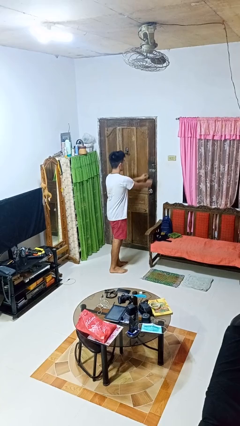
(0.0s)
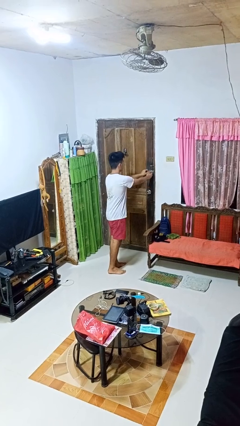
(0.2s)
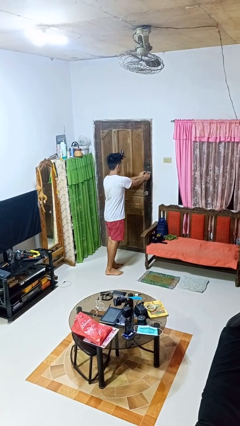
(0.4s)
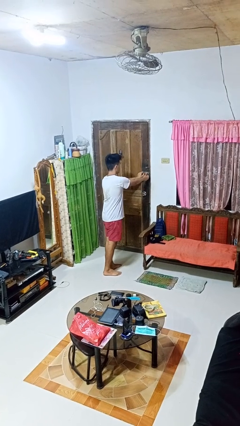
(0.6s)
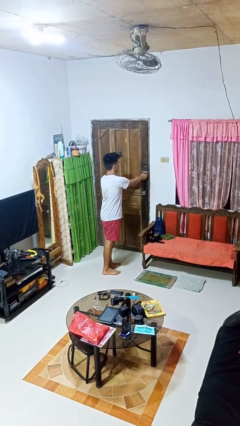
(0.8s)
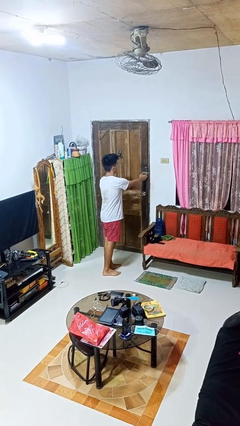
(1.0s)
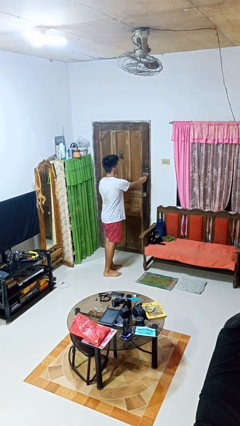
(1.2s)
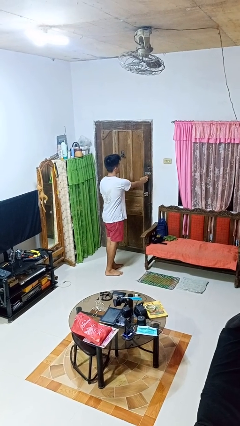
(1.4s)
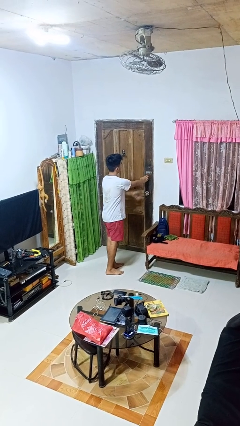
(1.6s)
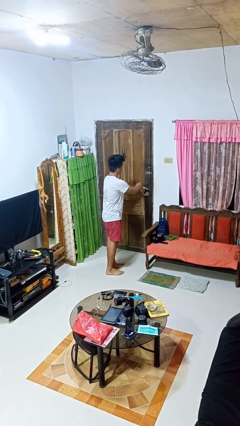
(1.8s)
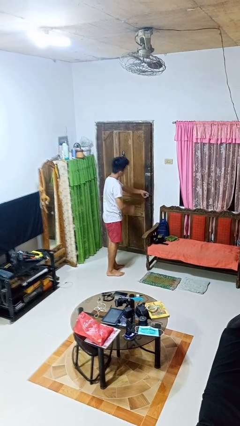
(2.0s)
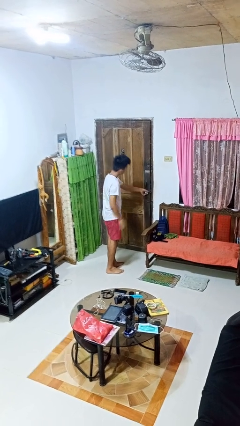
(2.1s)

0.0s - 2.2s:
person unlocks door with keys

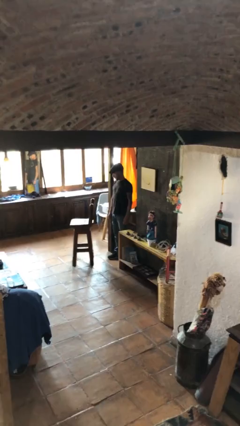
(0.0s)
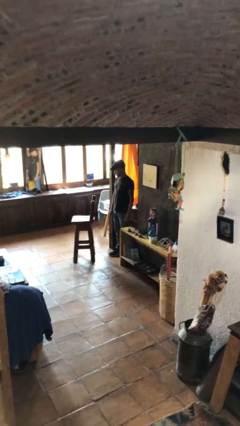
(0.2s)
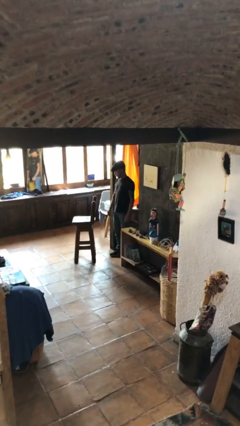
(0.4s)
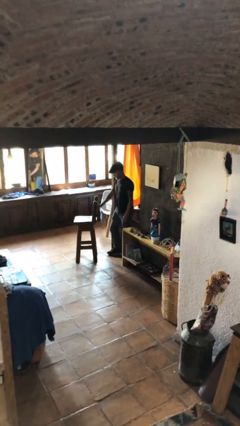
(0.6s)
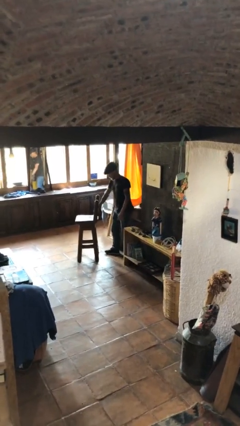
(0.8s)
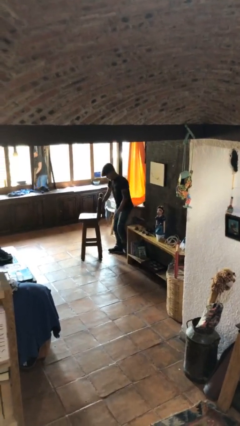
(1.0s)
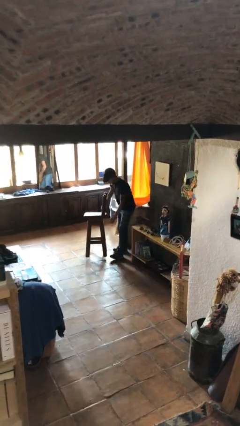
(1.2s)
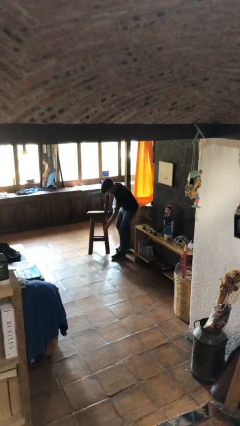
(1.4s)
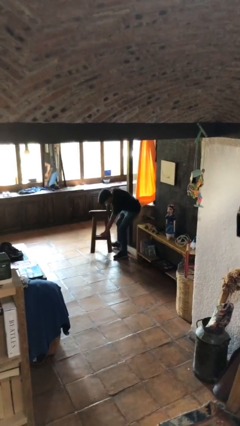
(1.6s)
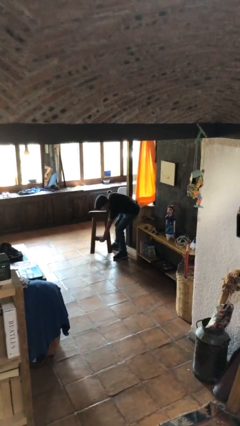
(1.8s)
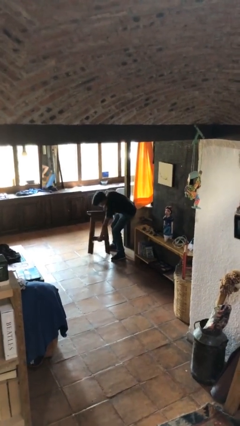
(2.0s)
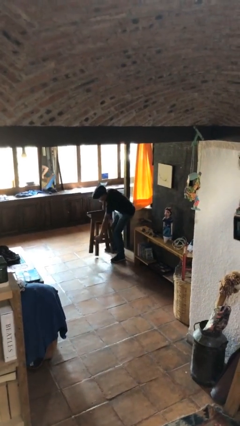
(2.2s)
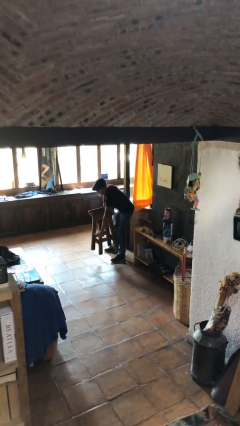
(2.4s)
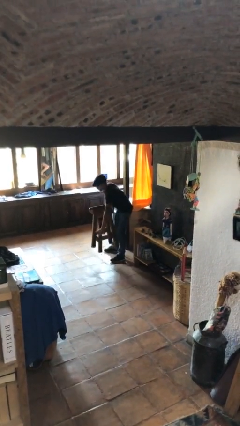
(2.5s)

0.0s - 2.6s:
person picks up object from floor

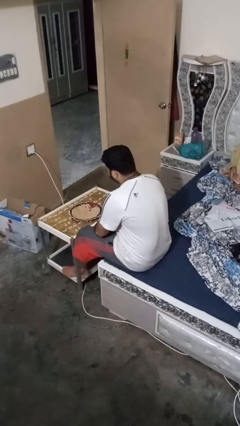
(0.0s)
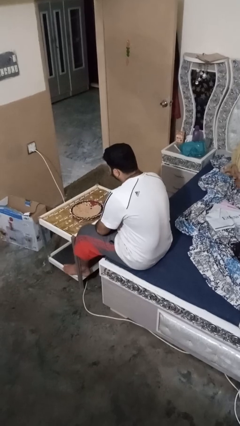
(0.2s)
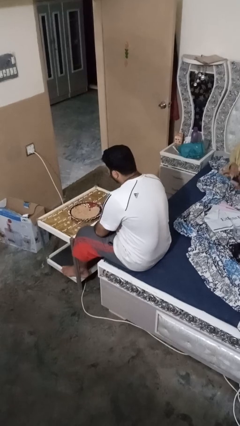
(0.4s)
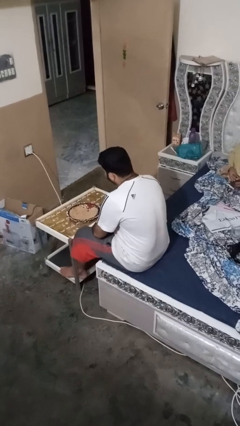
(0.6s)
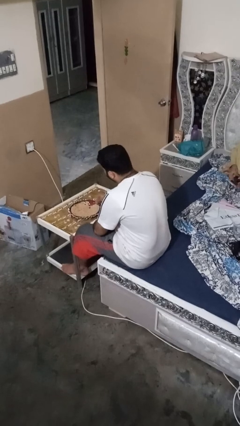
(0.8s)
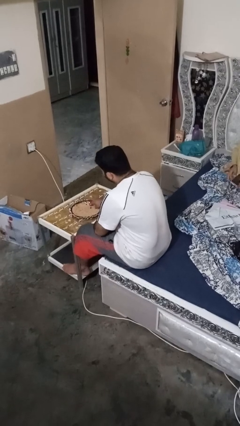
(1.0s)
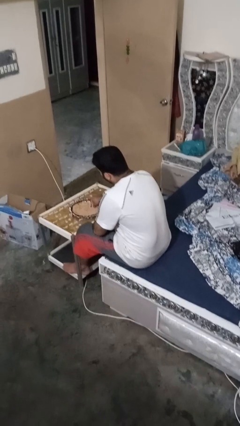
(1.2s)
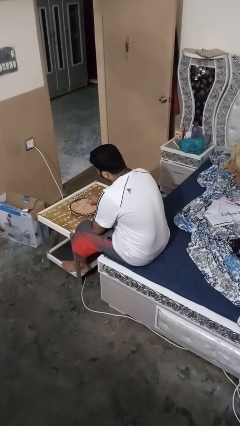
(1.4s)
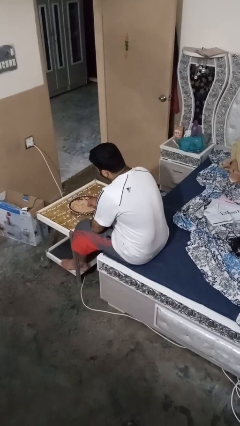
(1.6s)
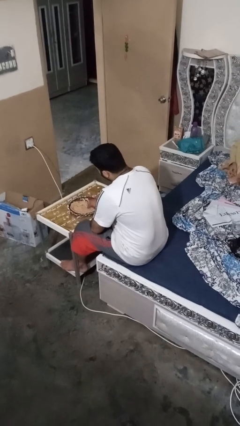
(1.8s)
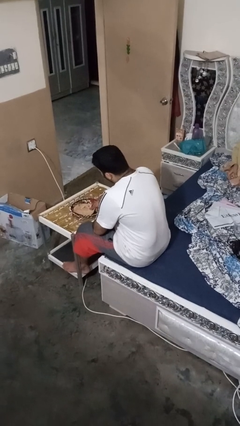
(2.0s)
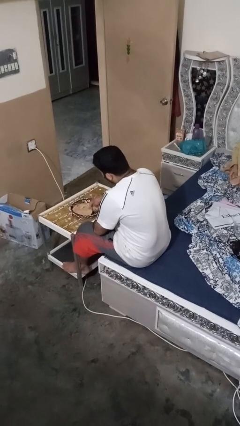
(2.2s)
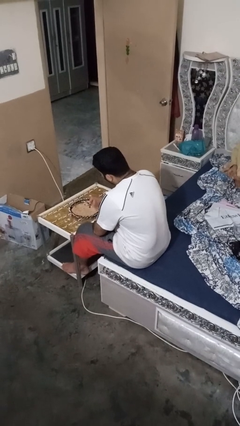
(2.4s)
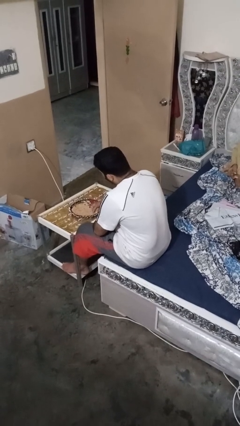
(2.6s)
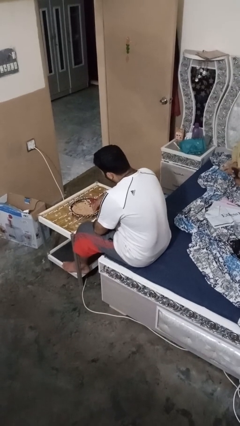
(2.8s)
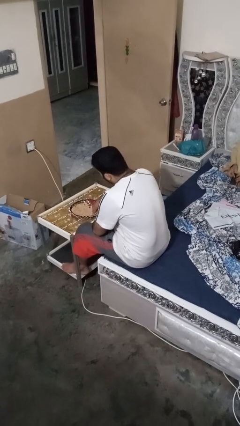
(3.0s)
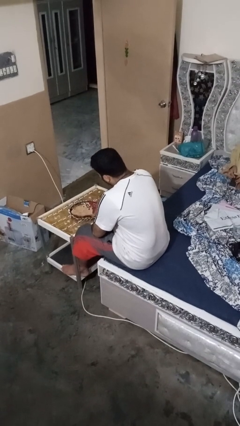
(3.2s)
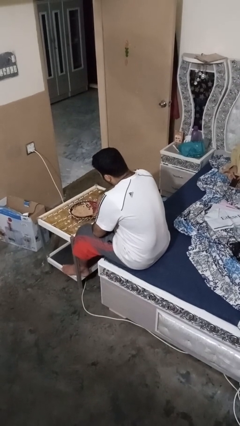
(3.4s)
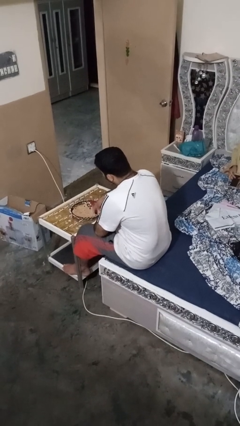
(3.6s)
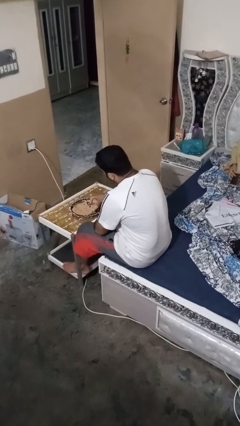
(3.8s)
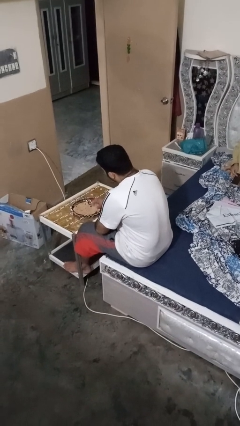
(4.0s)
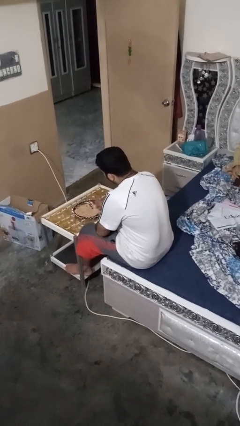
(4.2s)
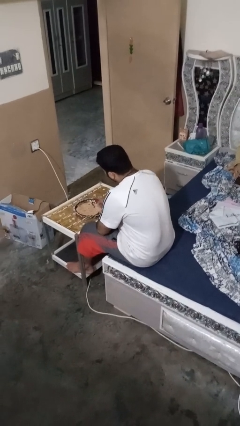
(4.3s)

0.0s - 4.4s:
person eats with hands

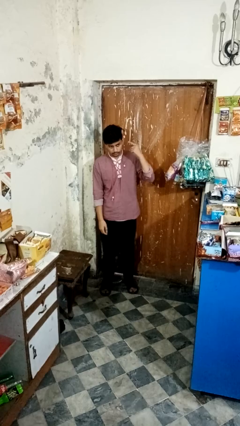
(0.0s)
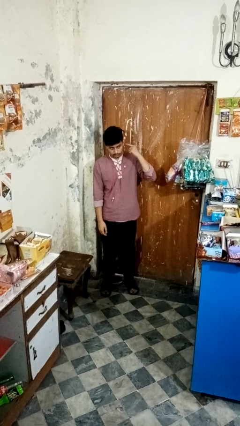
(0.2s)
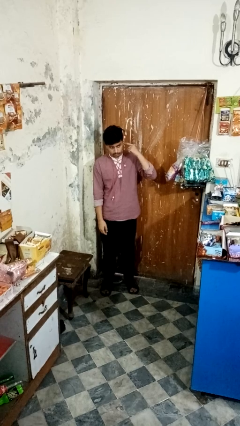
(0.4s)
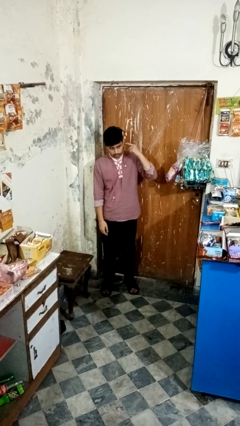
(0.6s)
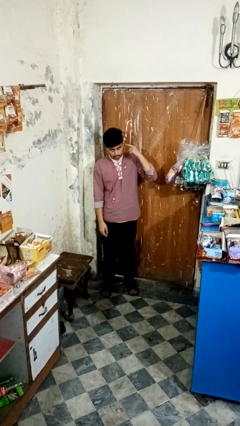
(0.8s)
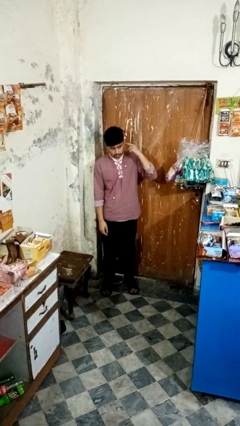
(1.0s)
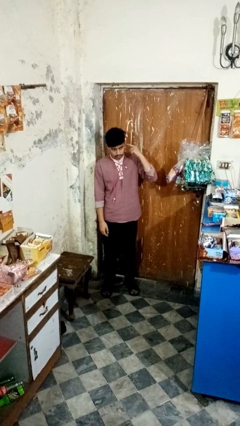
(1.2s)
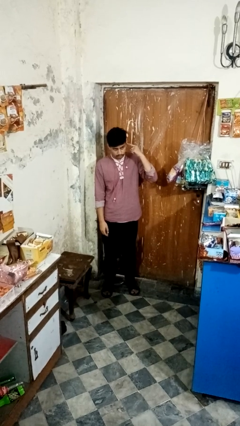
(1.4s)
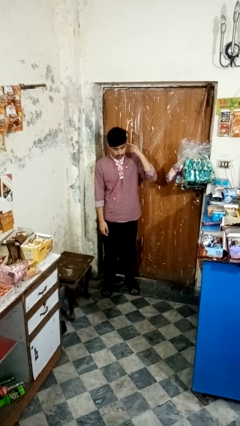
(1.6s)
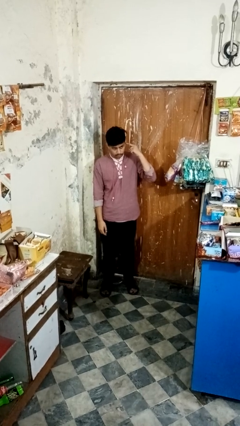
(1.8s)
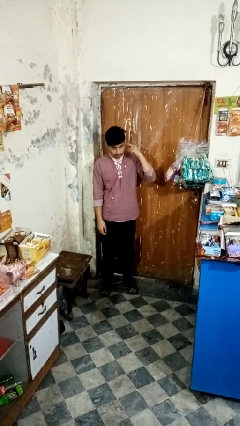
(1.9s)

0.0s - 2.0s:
person gestures listen closely

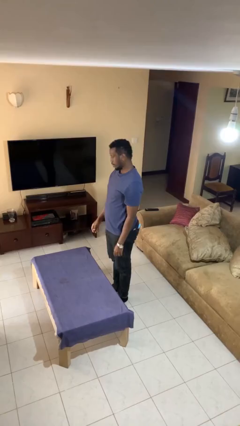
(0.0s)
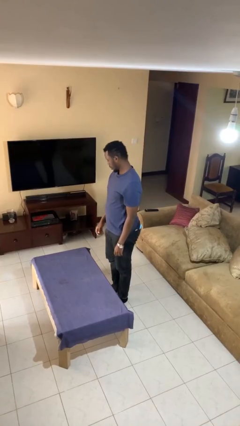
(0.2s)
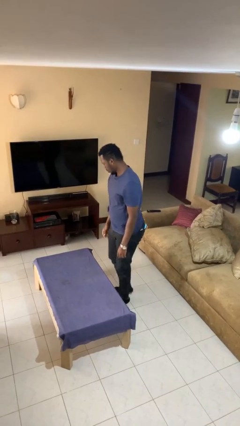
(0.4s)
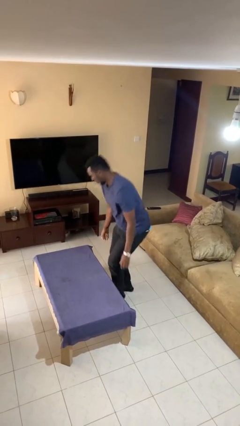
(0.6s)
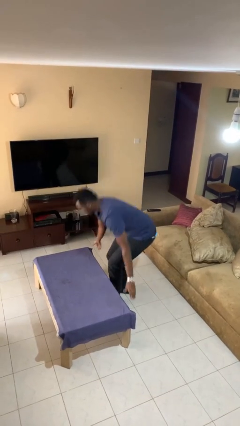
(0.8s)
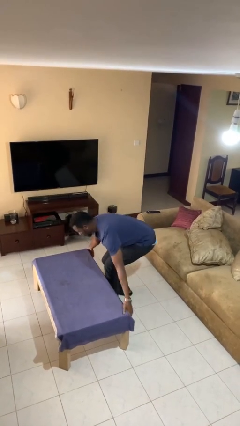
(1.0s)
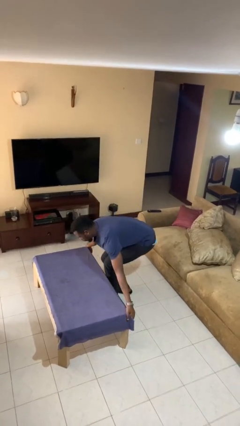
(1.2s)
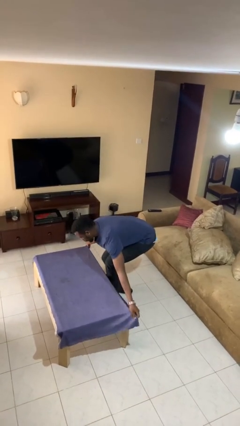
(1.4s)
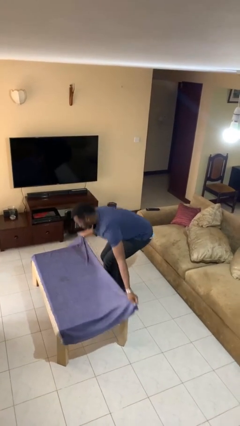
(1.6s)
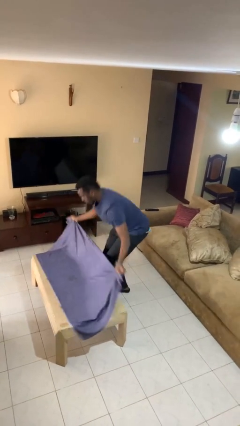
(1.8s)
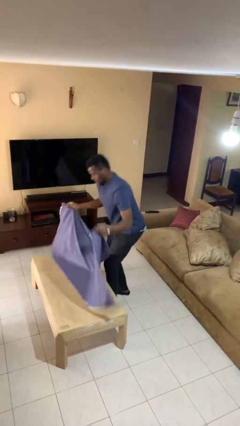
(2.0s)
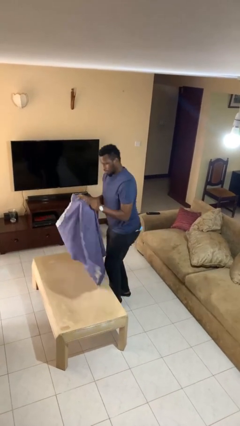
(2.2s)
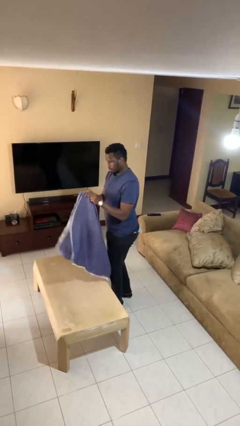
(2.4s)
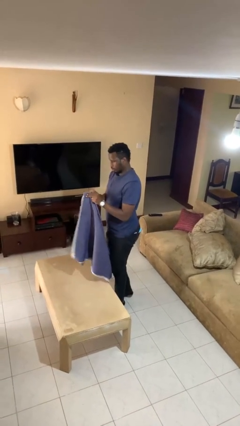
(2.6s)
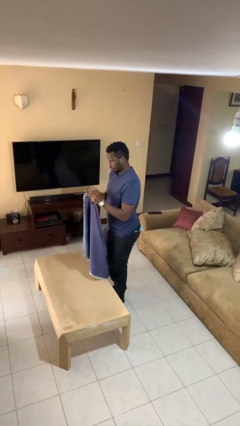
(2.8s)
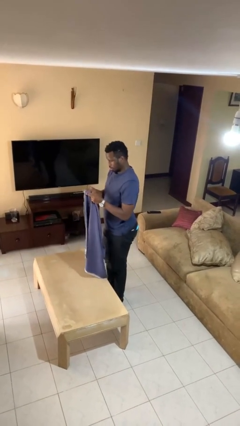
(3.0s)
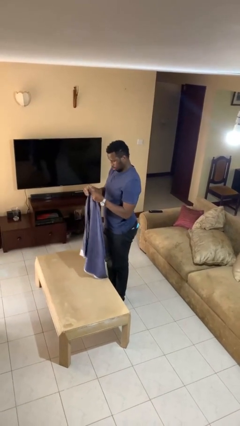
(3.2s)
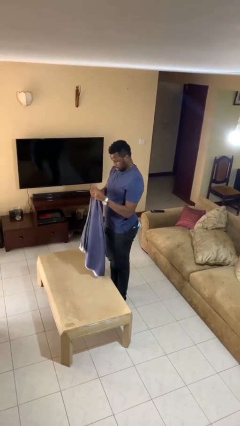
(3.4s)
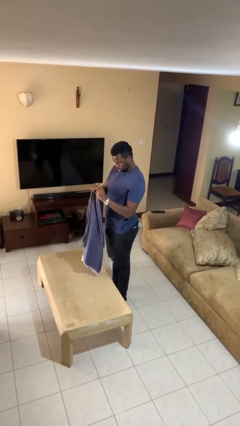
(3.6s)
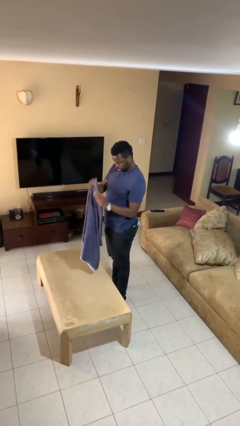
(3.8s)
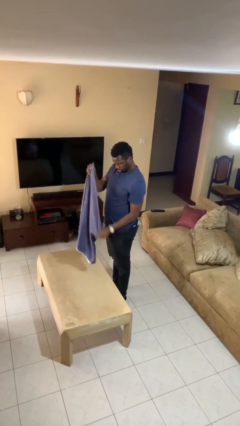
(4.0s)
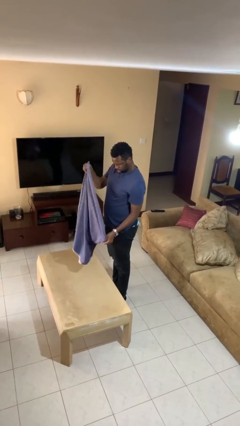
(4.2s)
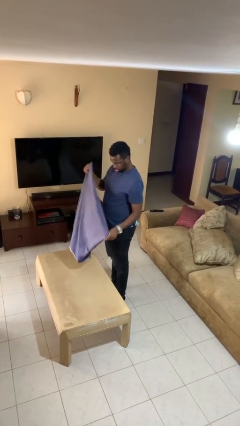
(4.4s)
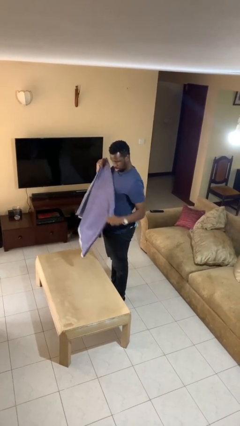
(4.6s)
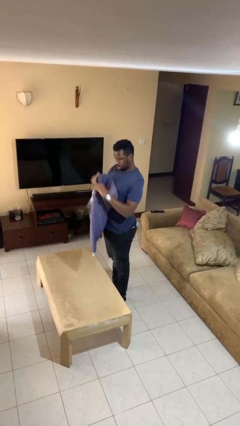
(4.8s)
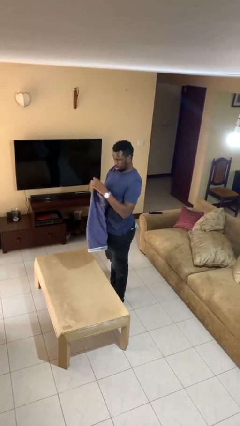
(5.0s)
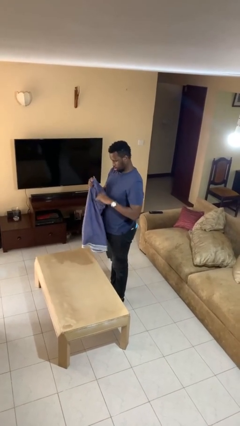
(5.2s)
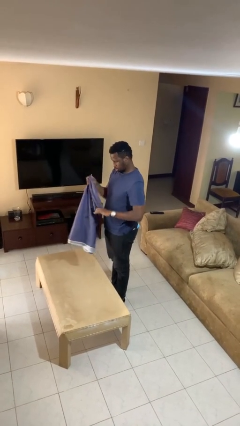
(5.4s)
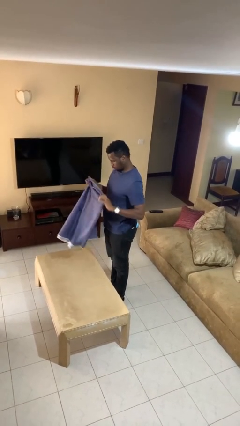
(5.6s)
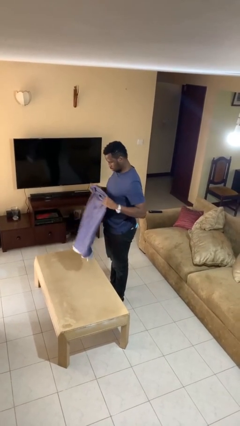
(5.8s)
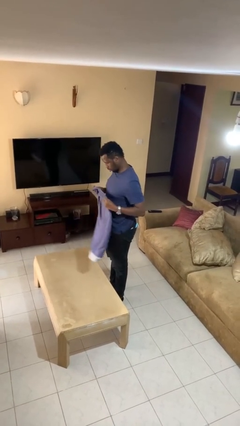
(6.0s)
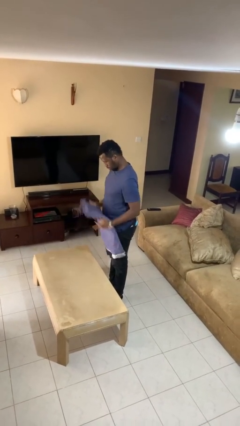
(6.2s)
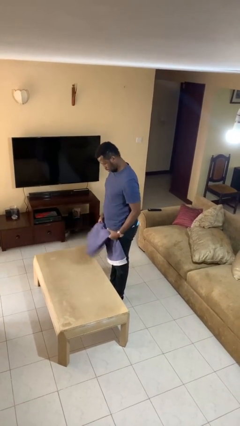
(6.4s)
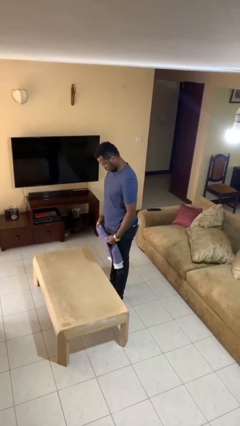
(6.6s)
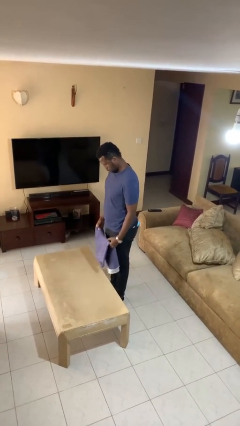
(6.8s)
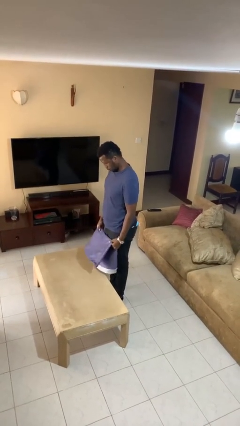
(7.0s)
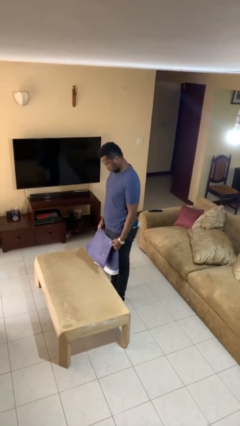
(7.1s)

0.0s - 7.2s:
person folds tablecloth
